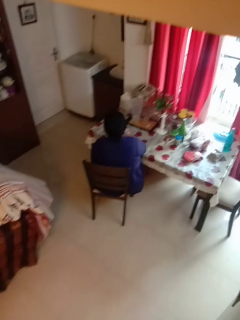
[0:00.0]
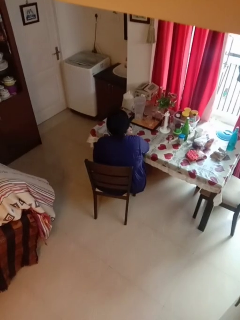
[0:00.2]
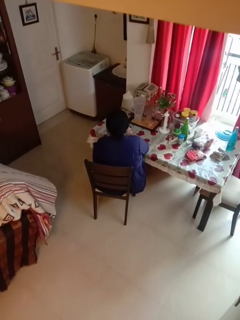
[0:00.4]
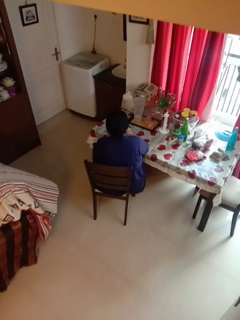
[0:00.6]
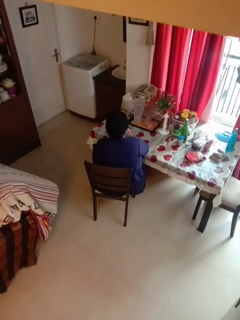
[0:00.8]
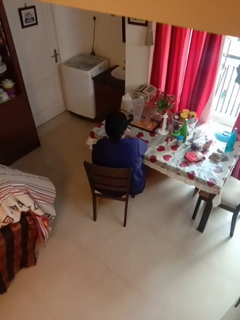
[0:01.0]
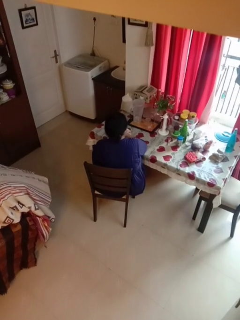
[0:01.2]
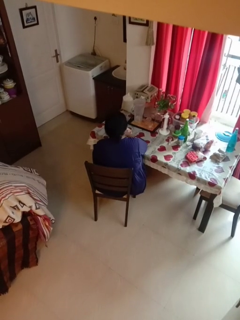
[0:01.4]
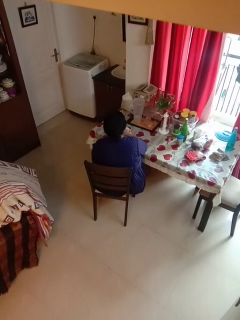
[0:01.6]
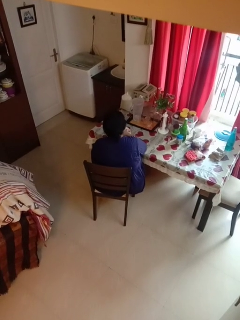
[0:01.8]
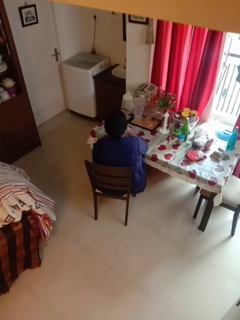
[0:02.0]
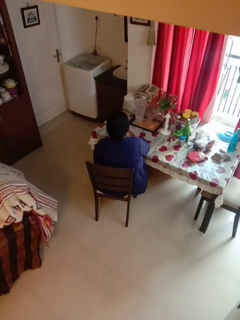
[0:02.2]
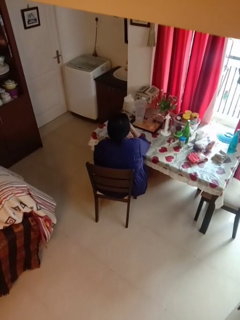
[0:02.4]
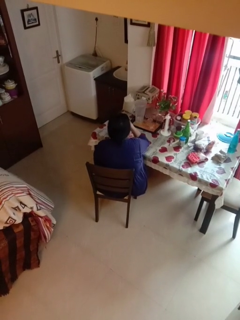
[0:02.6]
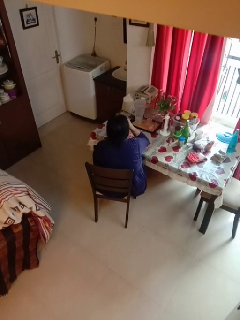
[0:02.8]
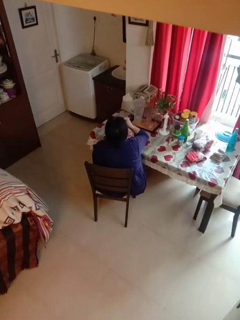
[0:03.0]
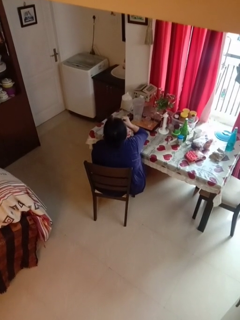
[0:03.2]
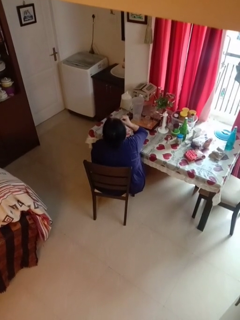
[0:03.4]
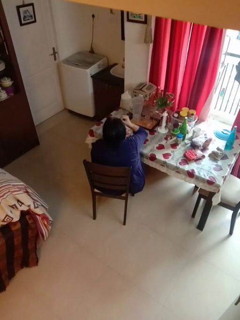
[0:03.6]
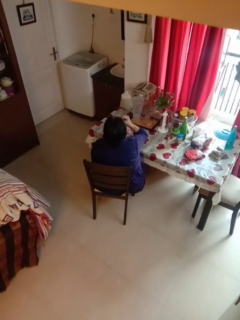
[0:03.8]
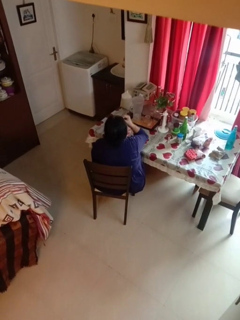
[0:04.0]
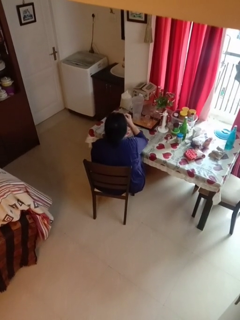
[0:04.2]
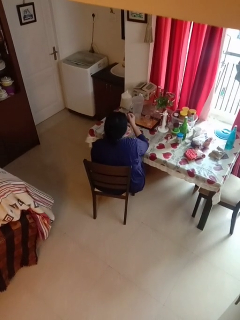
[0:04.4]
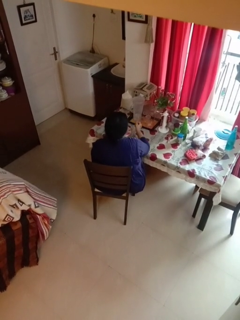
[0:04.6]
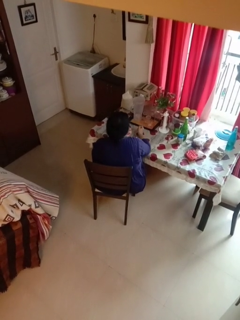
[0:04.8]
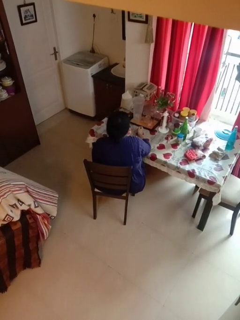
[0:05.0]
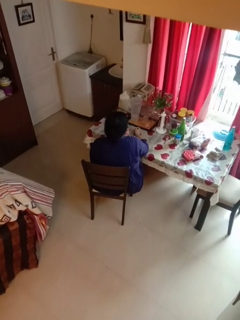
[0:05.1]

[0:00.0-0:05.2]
person eats with hands

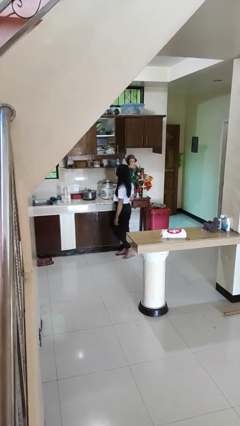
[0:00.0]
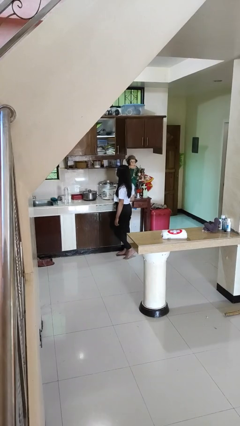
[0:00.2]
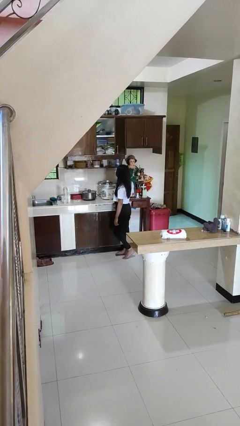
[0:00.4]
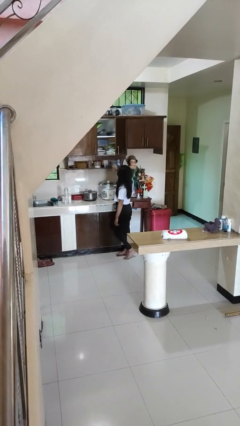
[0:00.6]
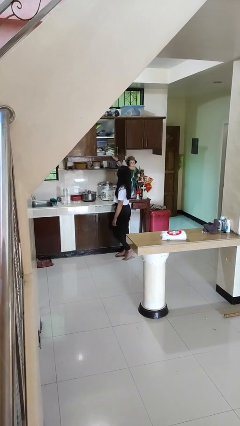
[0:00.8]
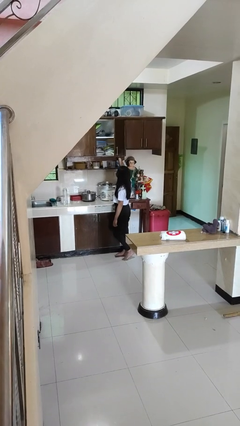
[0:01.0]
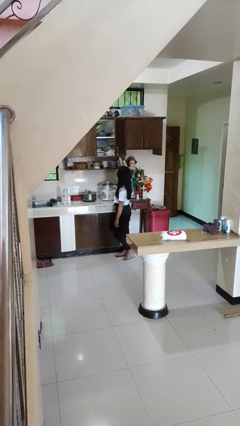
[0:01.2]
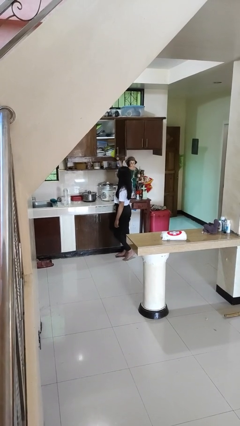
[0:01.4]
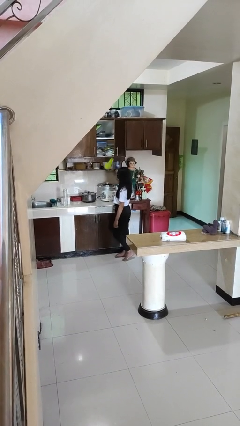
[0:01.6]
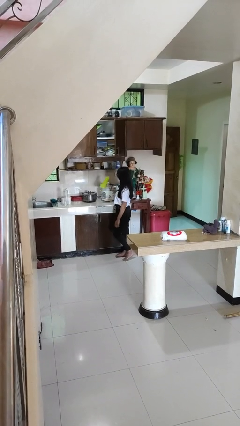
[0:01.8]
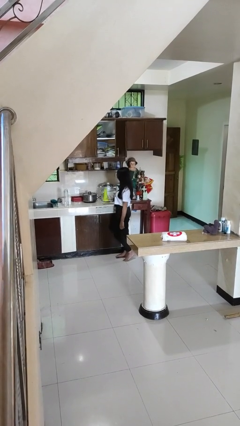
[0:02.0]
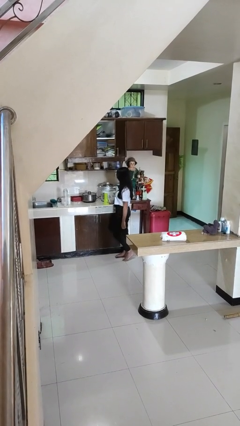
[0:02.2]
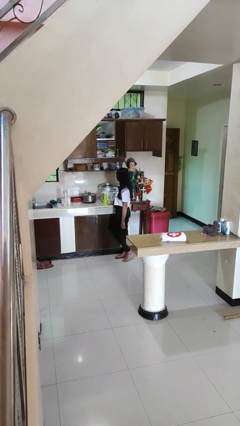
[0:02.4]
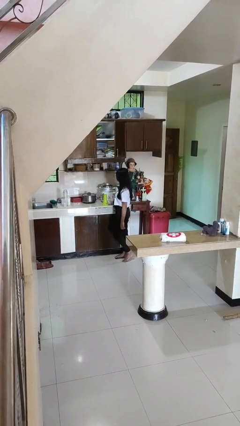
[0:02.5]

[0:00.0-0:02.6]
person picks up object from cabinet

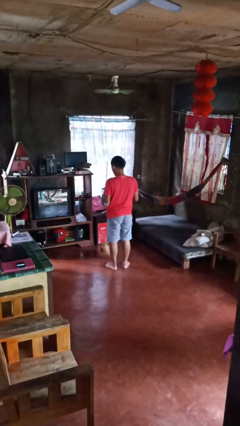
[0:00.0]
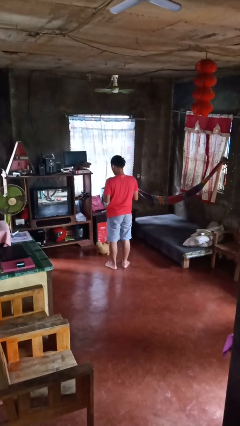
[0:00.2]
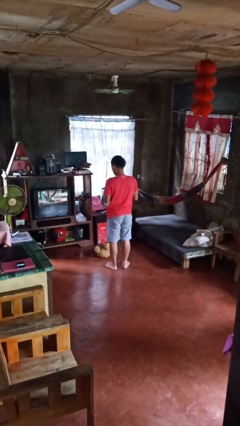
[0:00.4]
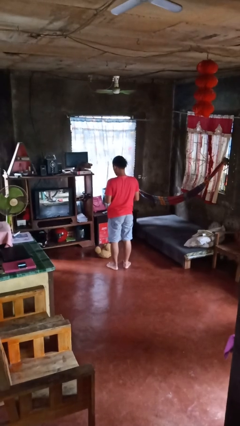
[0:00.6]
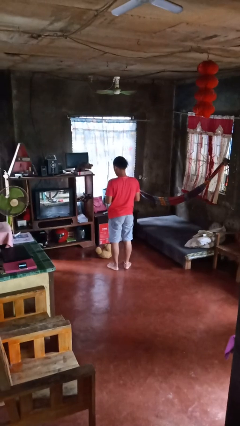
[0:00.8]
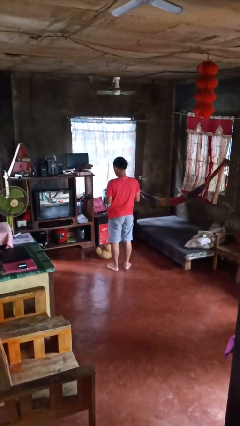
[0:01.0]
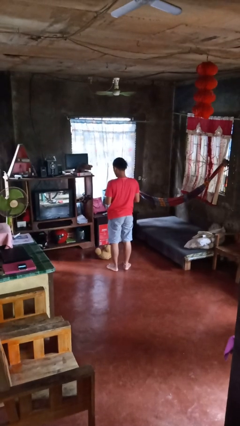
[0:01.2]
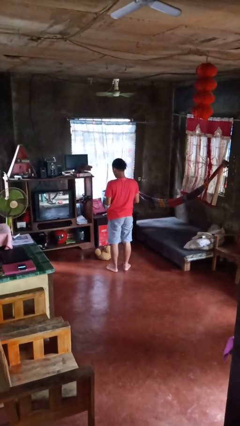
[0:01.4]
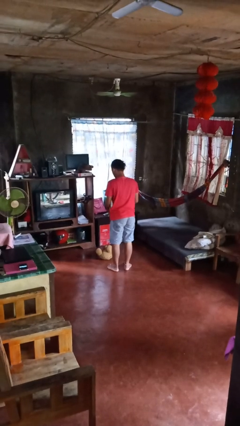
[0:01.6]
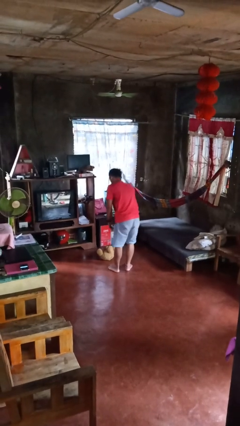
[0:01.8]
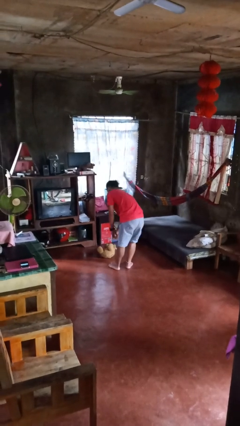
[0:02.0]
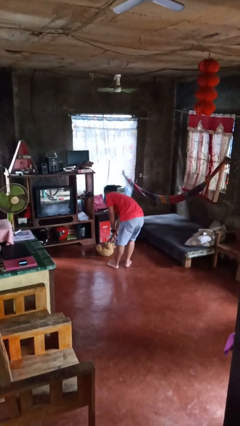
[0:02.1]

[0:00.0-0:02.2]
person drops object

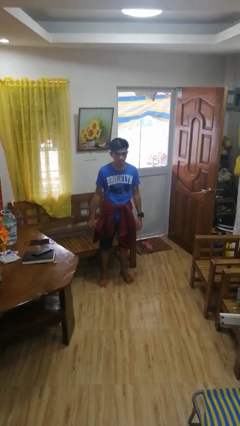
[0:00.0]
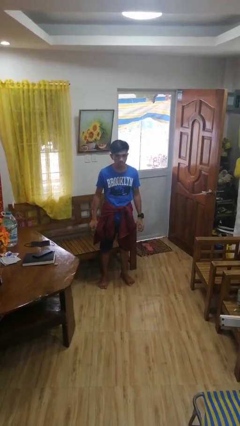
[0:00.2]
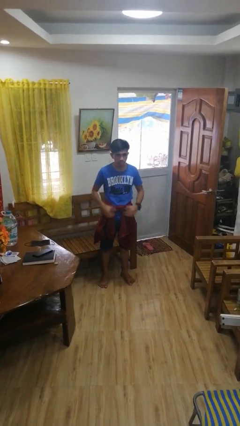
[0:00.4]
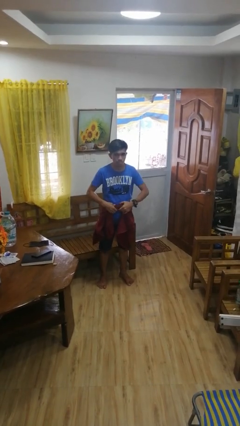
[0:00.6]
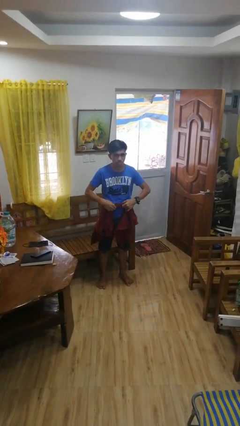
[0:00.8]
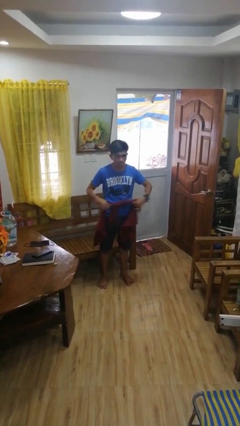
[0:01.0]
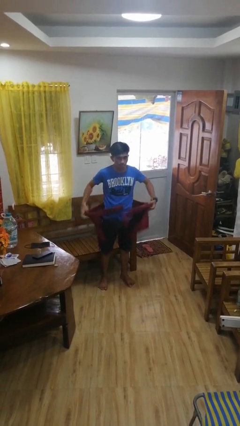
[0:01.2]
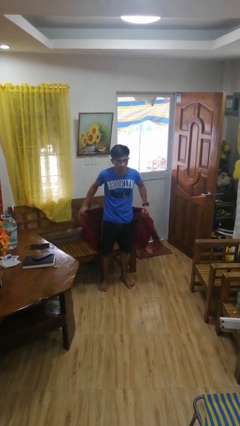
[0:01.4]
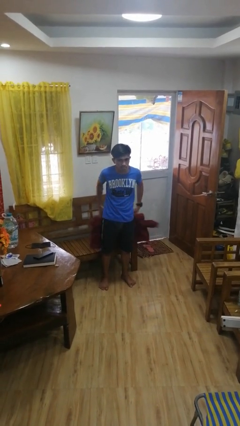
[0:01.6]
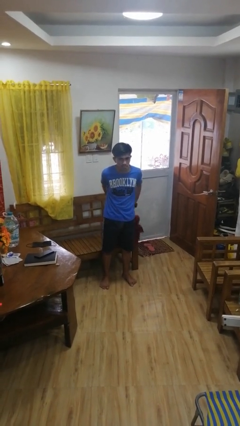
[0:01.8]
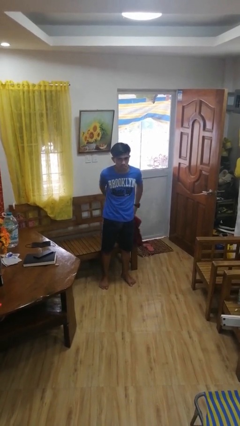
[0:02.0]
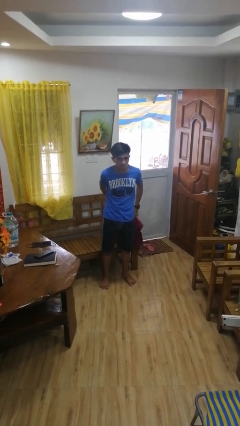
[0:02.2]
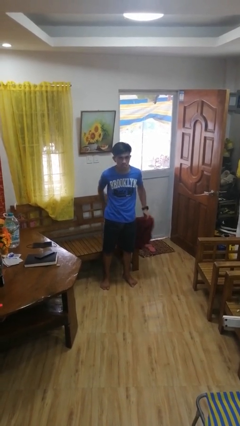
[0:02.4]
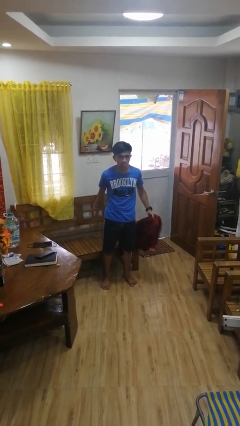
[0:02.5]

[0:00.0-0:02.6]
person unties jacket around waist

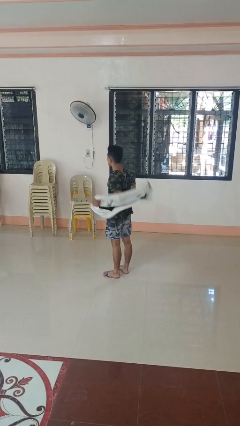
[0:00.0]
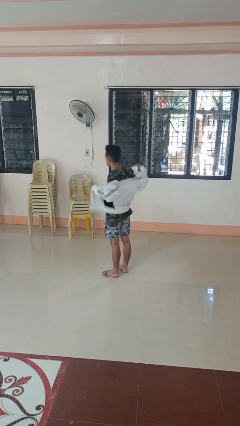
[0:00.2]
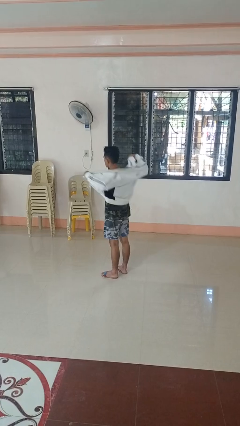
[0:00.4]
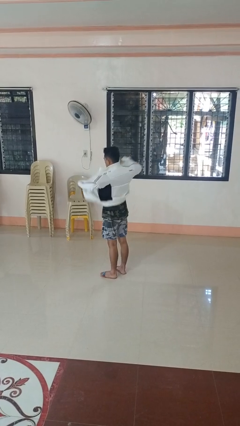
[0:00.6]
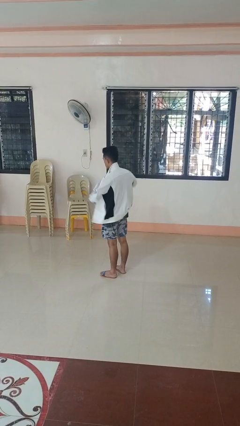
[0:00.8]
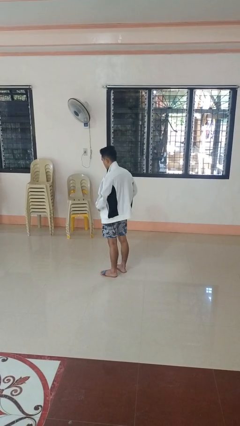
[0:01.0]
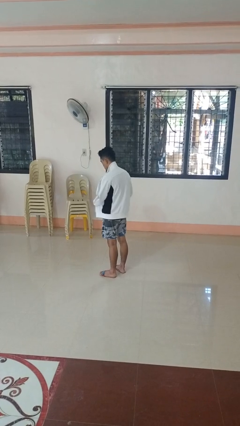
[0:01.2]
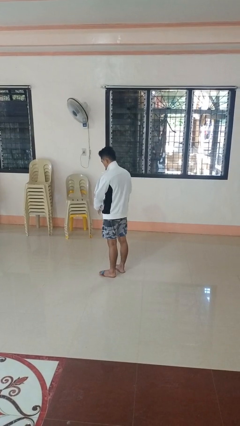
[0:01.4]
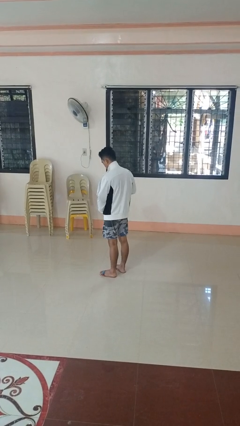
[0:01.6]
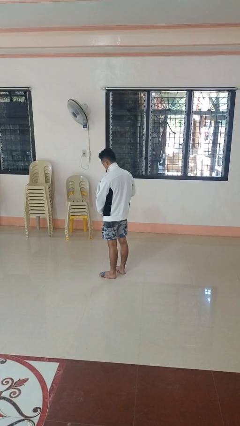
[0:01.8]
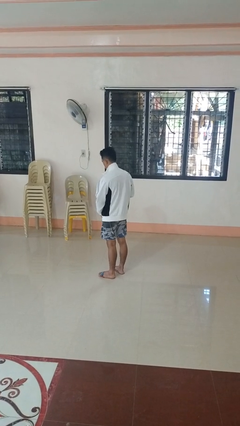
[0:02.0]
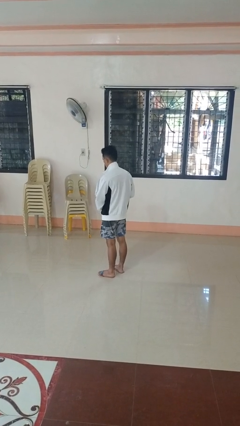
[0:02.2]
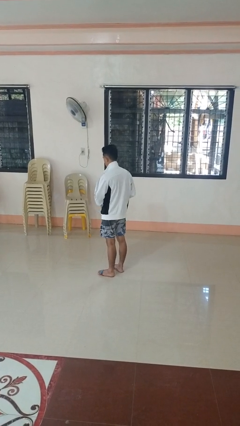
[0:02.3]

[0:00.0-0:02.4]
person puts on jacket

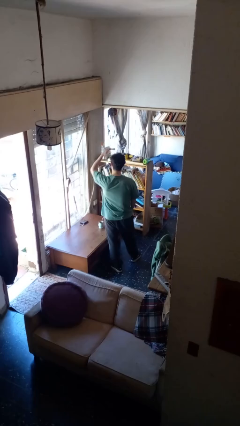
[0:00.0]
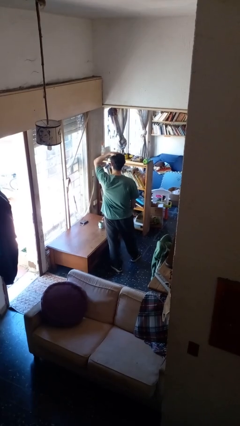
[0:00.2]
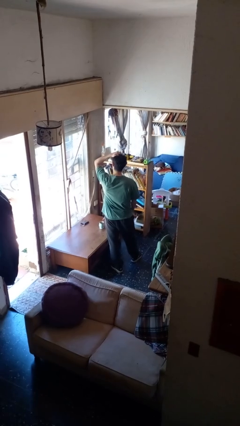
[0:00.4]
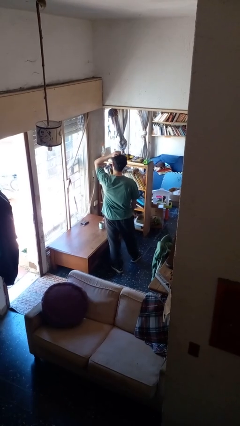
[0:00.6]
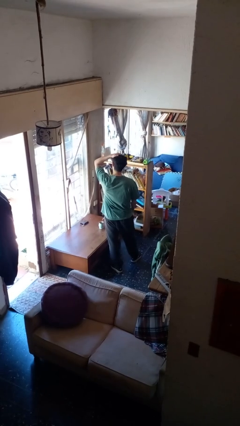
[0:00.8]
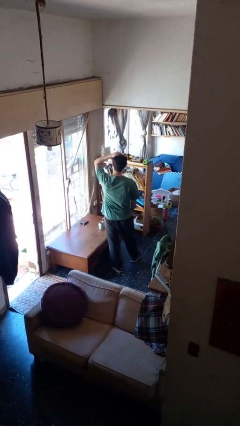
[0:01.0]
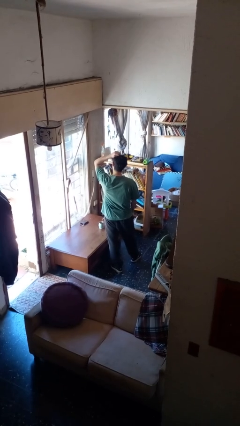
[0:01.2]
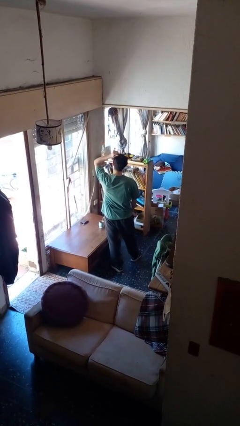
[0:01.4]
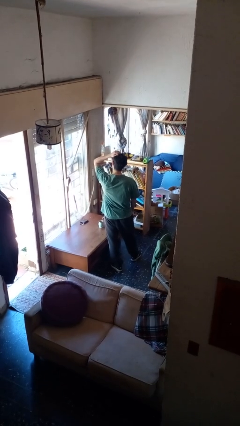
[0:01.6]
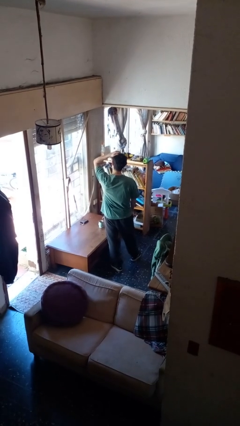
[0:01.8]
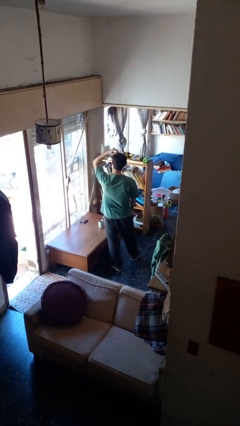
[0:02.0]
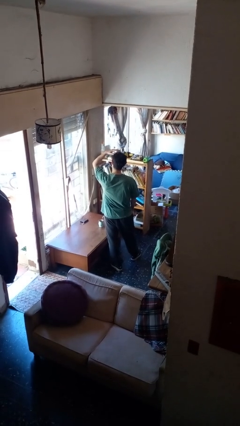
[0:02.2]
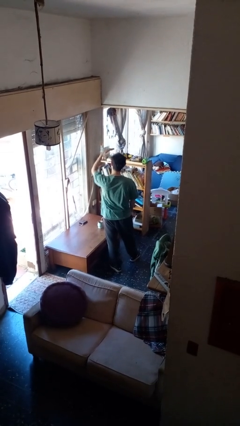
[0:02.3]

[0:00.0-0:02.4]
person pats head

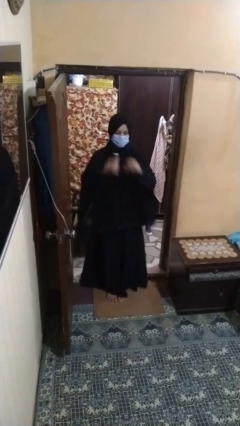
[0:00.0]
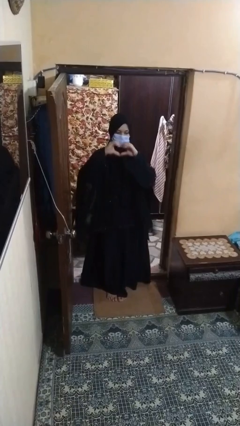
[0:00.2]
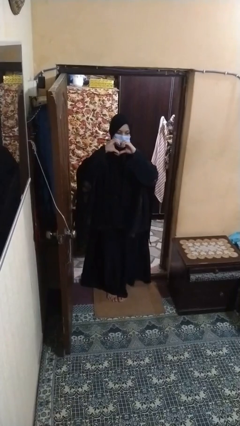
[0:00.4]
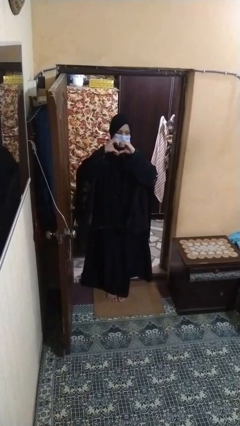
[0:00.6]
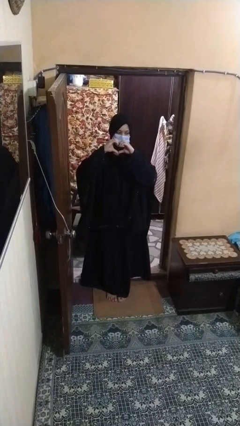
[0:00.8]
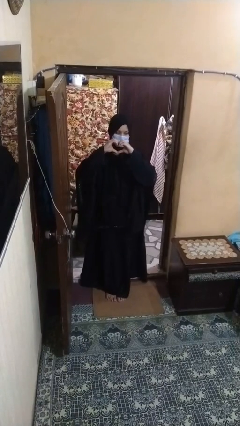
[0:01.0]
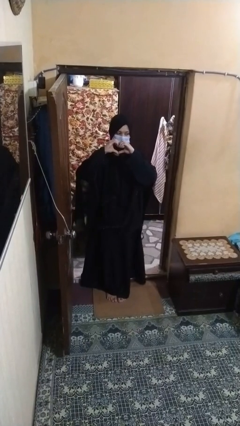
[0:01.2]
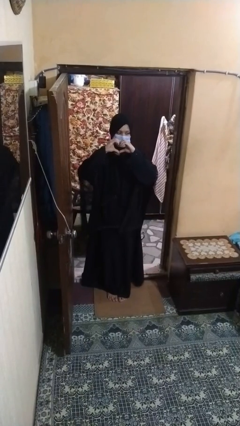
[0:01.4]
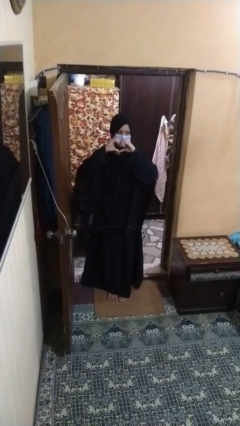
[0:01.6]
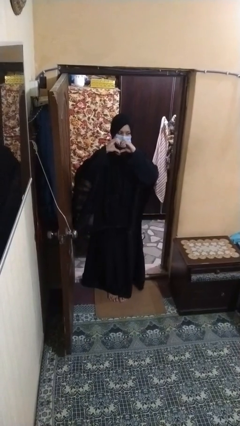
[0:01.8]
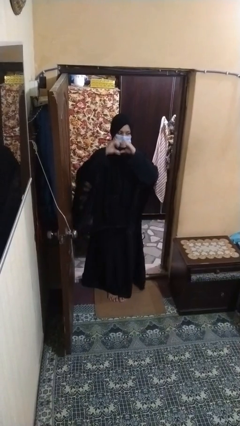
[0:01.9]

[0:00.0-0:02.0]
person gestures heart
